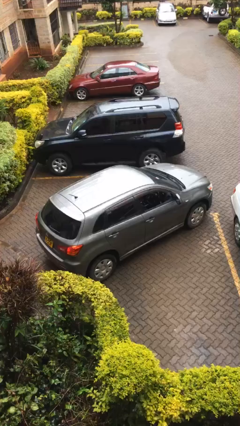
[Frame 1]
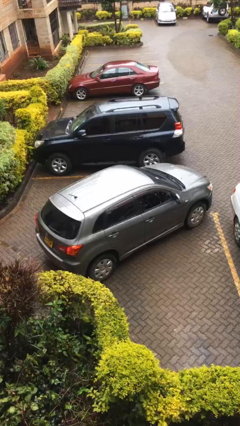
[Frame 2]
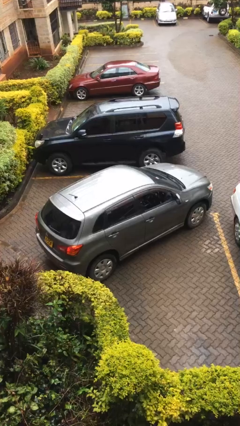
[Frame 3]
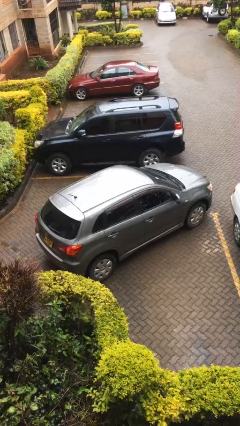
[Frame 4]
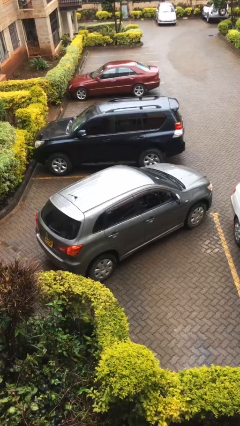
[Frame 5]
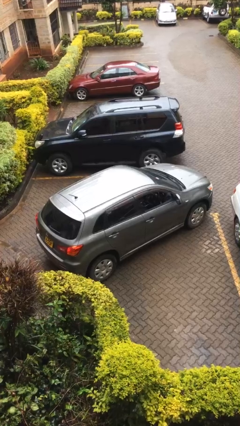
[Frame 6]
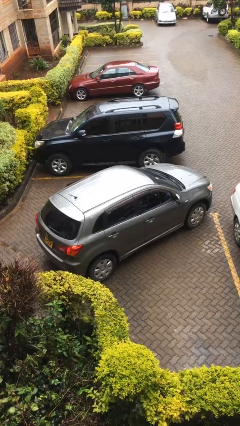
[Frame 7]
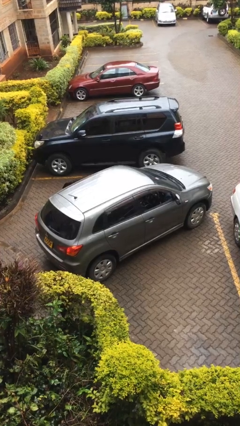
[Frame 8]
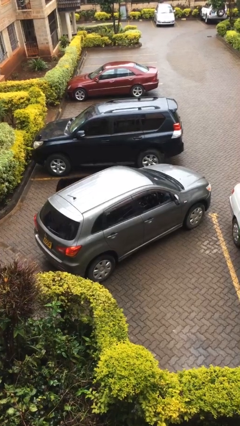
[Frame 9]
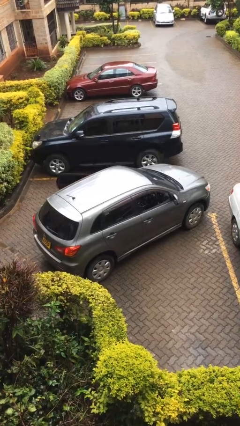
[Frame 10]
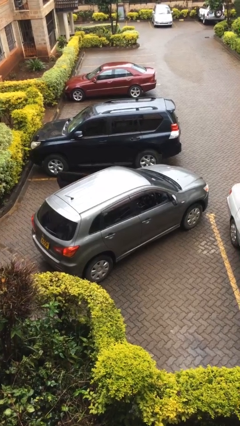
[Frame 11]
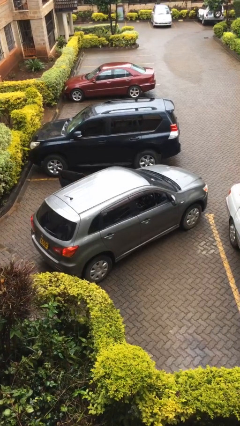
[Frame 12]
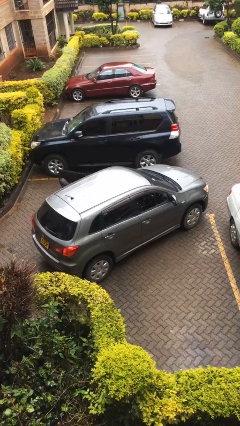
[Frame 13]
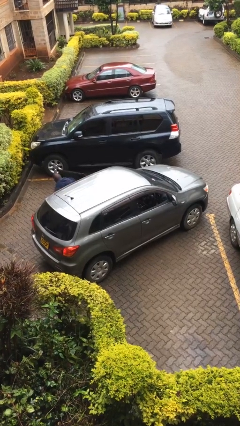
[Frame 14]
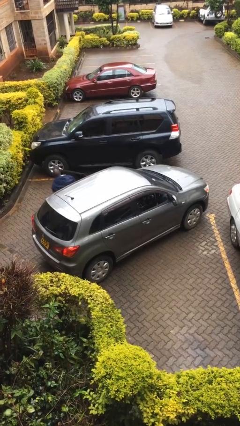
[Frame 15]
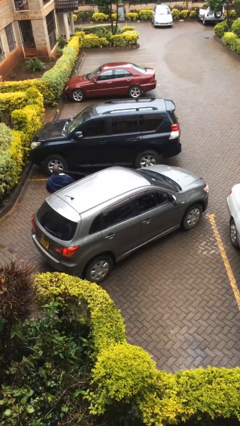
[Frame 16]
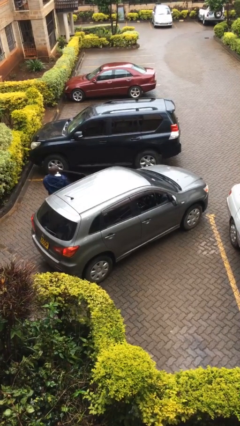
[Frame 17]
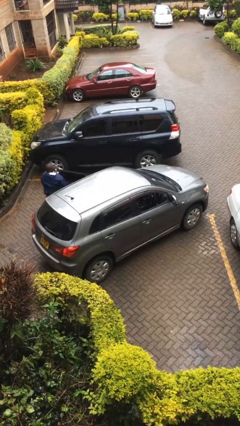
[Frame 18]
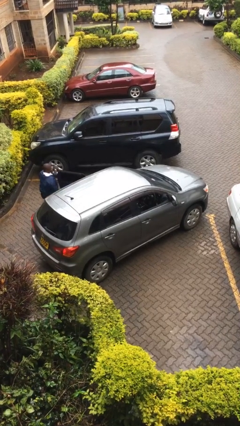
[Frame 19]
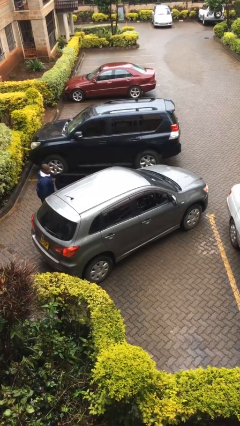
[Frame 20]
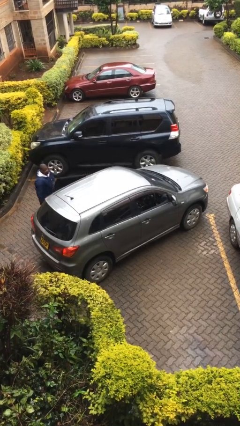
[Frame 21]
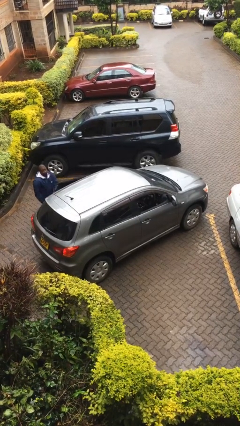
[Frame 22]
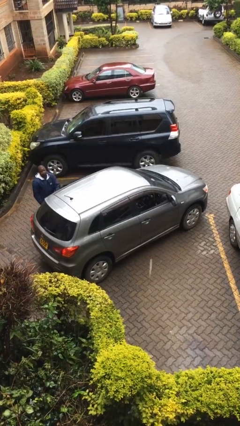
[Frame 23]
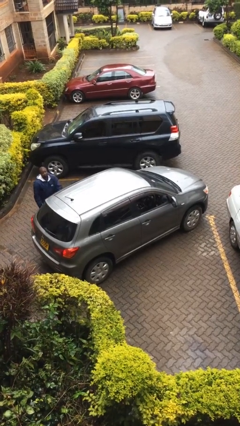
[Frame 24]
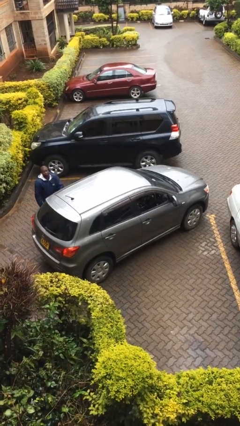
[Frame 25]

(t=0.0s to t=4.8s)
car drops off person

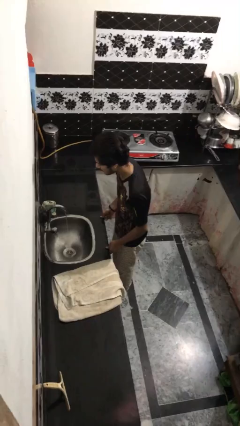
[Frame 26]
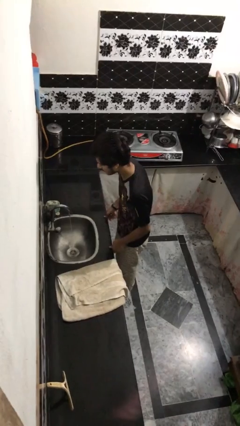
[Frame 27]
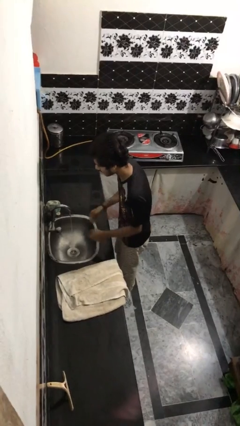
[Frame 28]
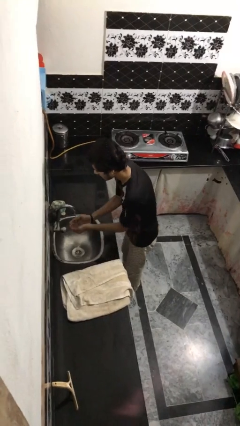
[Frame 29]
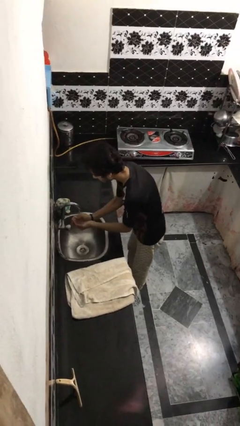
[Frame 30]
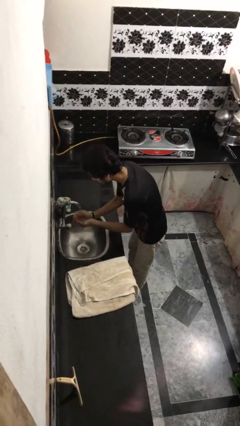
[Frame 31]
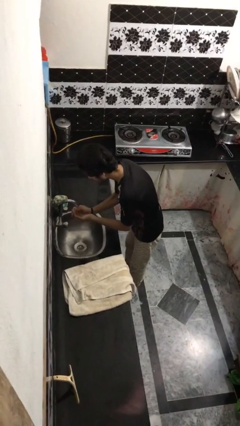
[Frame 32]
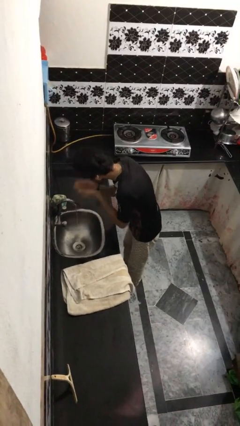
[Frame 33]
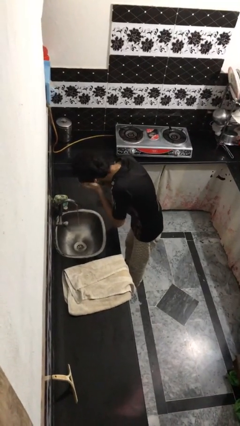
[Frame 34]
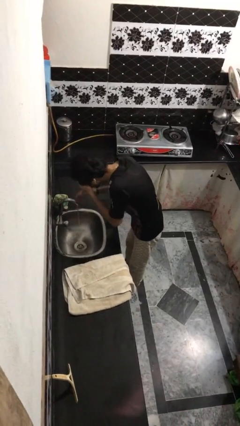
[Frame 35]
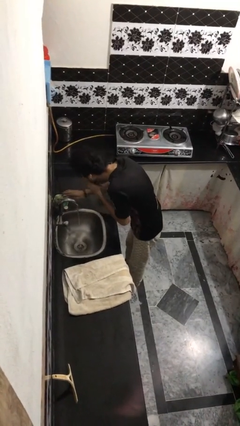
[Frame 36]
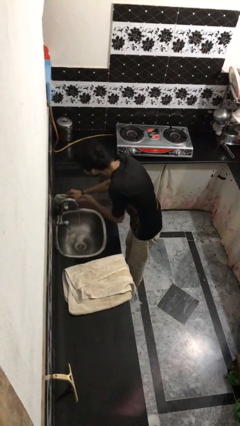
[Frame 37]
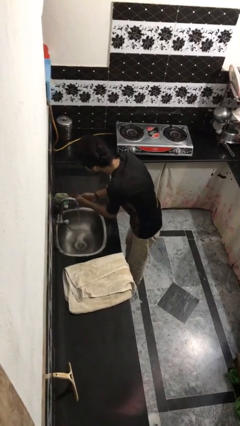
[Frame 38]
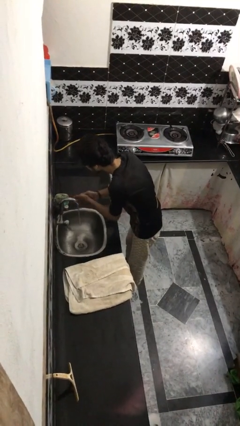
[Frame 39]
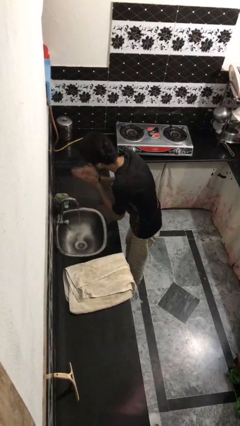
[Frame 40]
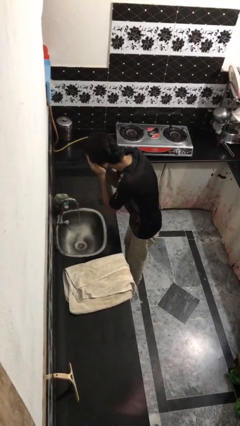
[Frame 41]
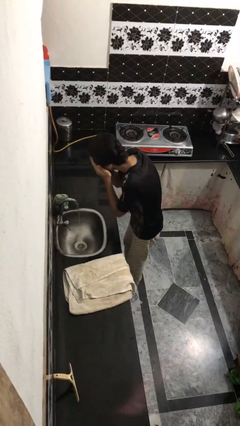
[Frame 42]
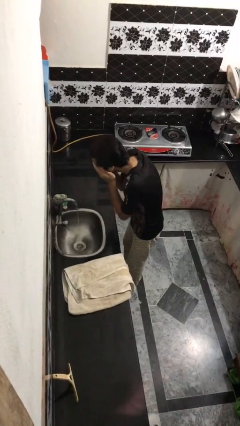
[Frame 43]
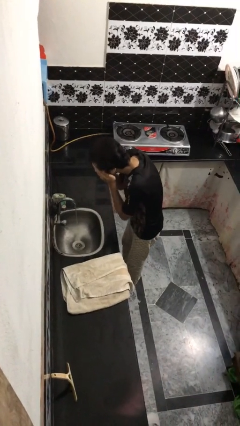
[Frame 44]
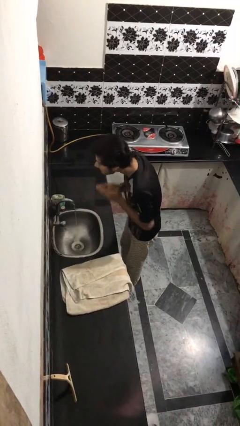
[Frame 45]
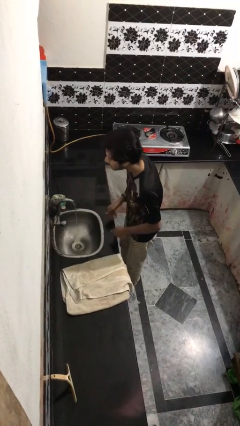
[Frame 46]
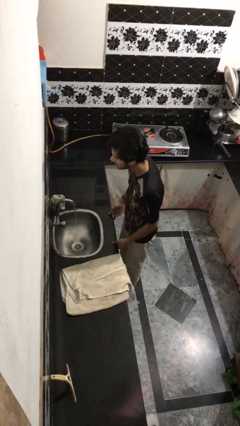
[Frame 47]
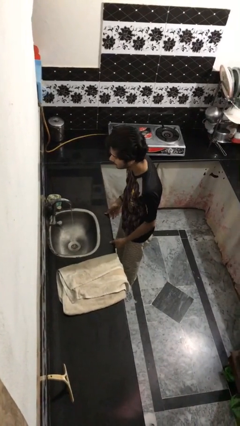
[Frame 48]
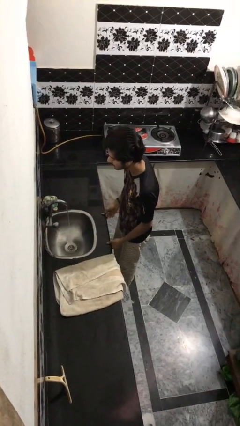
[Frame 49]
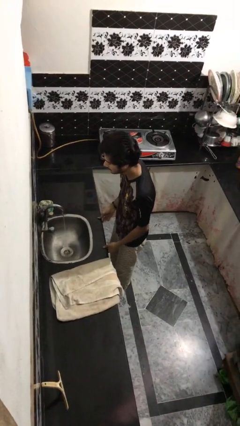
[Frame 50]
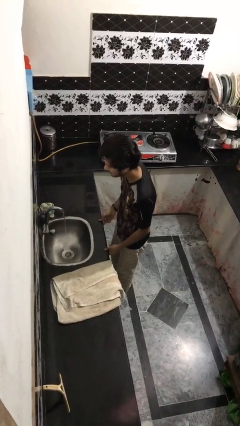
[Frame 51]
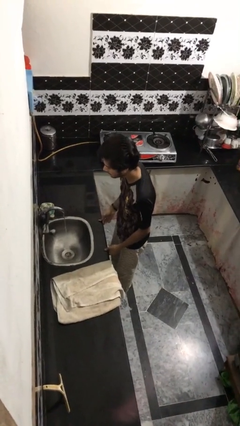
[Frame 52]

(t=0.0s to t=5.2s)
person washes face

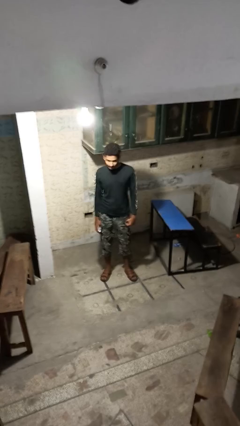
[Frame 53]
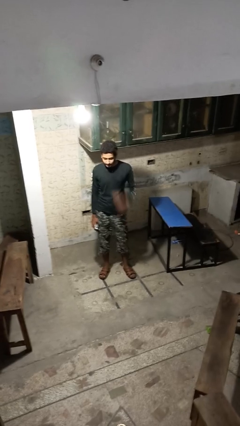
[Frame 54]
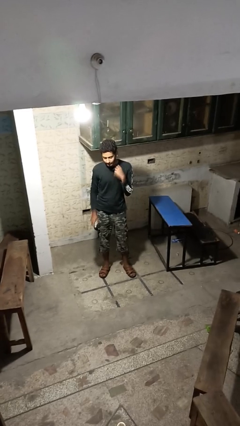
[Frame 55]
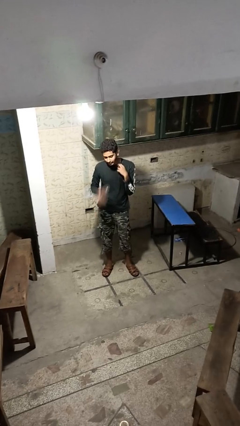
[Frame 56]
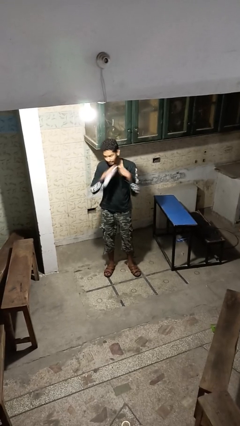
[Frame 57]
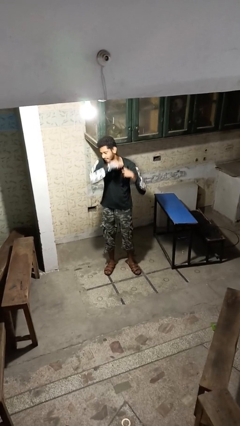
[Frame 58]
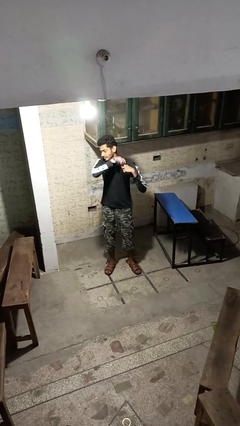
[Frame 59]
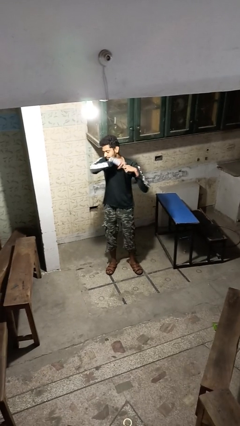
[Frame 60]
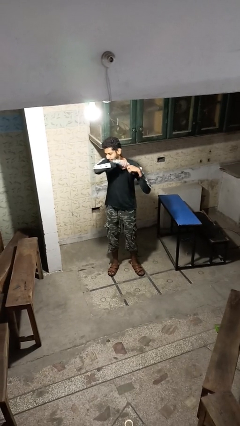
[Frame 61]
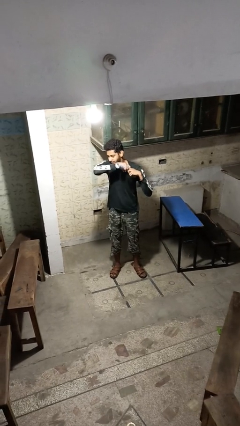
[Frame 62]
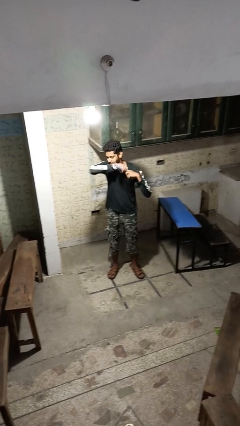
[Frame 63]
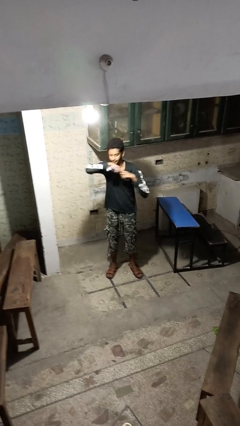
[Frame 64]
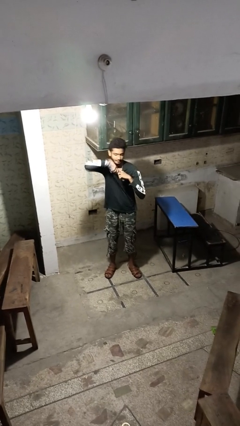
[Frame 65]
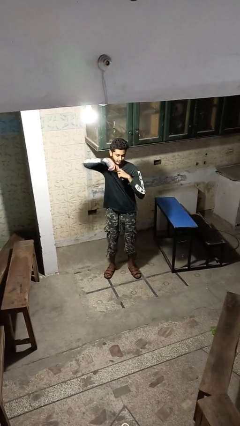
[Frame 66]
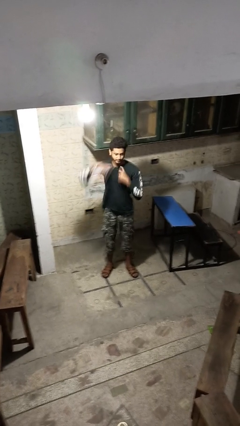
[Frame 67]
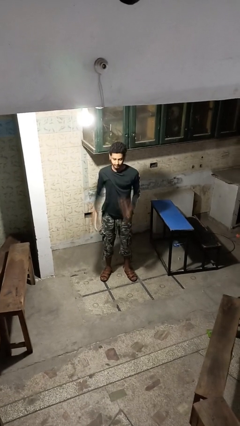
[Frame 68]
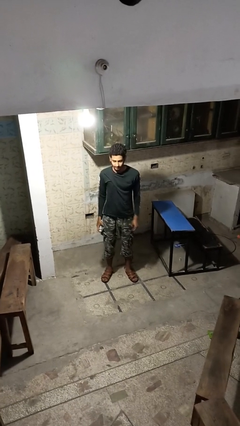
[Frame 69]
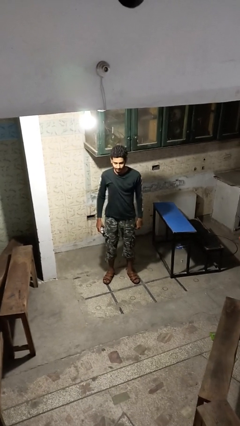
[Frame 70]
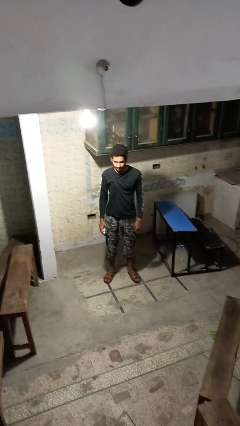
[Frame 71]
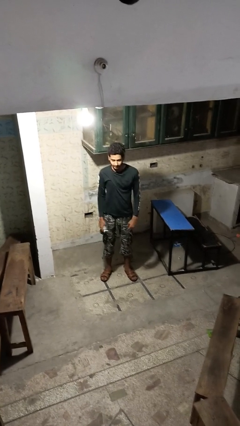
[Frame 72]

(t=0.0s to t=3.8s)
person applies deodorant

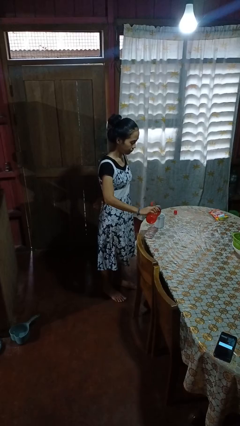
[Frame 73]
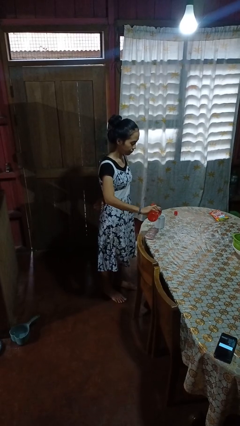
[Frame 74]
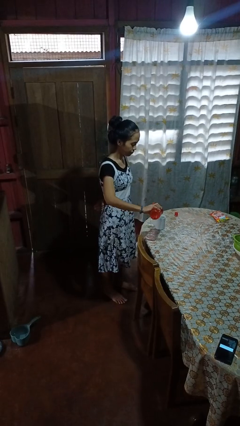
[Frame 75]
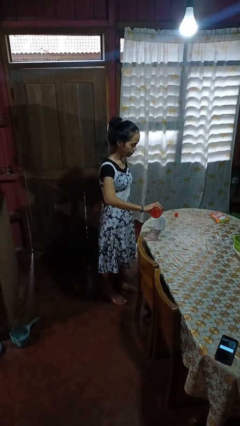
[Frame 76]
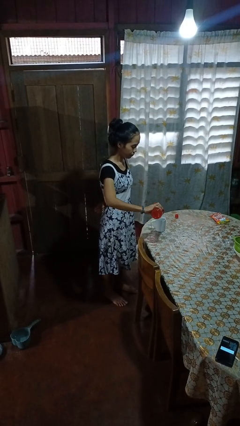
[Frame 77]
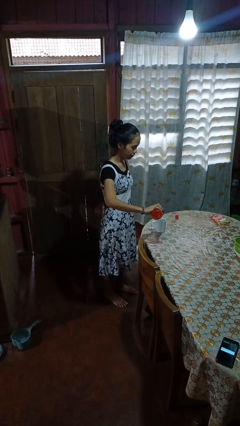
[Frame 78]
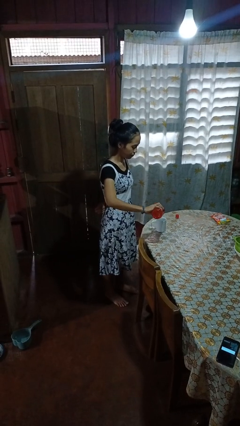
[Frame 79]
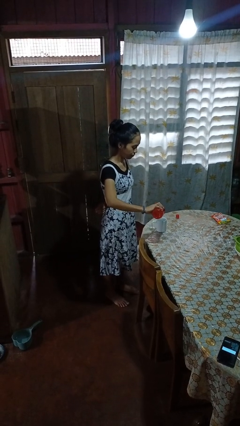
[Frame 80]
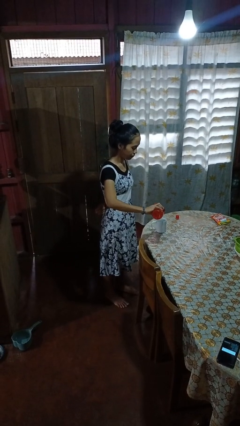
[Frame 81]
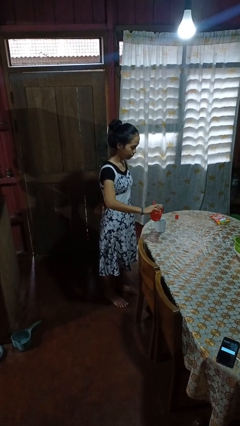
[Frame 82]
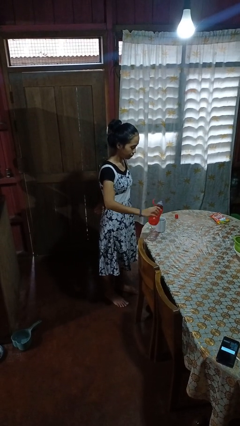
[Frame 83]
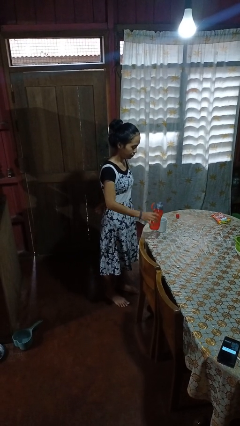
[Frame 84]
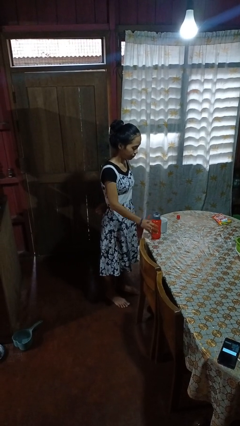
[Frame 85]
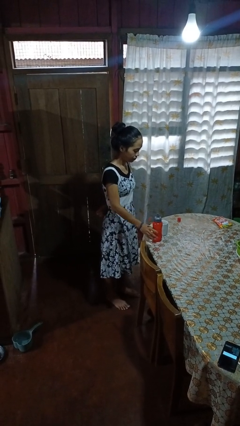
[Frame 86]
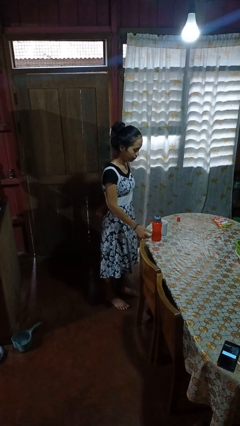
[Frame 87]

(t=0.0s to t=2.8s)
person pours liquid into cup

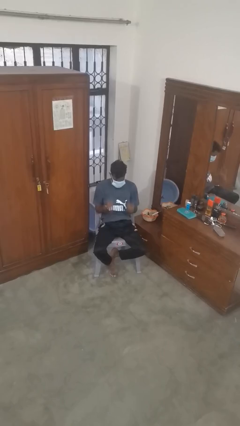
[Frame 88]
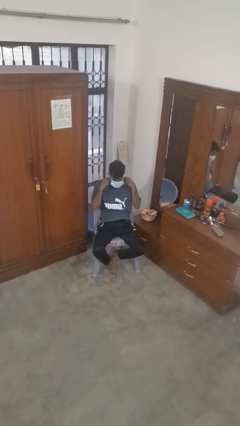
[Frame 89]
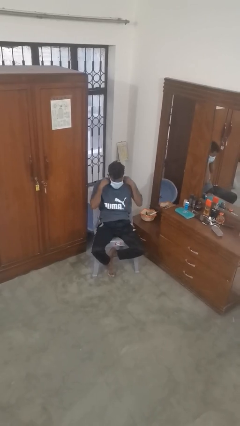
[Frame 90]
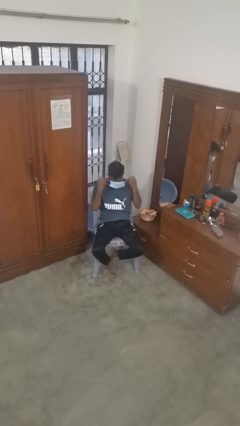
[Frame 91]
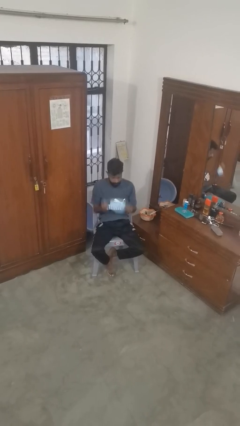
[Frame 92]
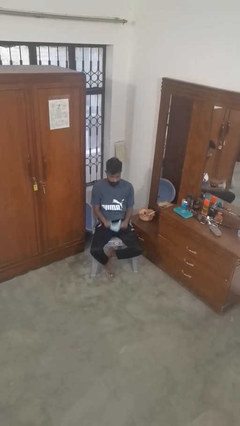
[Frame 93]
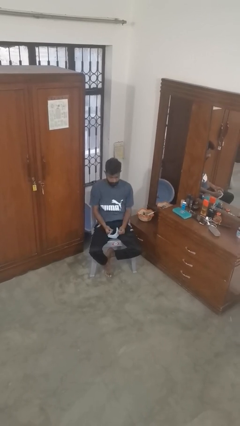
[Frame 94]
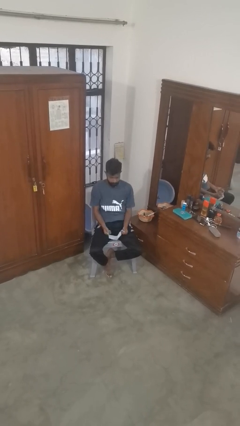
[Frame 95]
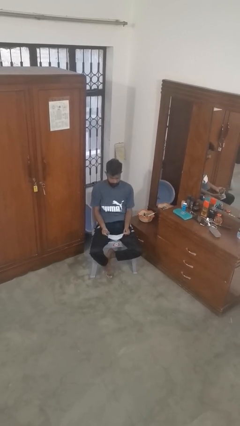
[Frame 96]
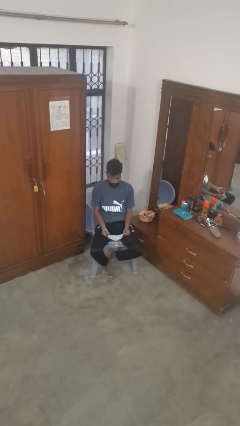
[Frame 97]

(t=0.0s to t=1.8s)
person takes off facemask
